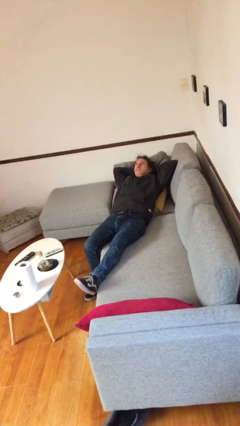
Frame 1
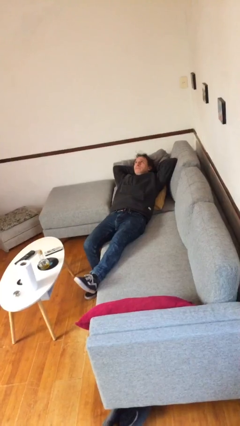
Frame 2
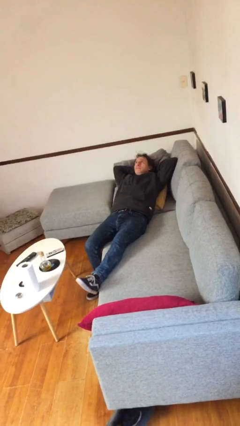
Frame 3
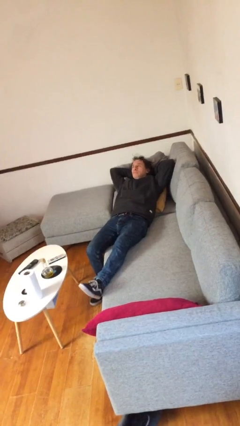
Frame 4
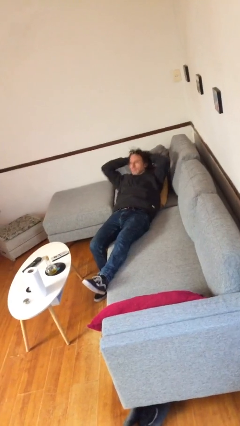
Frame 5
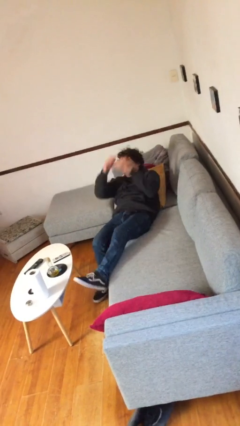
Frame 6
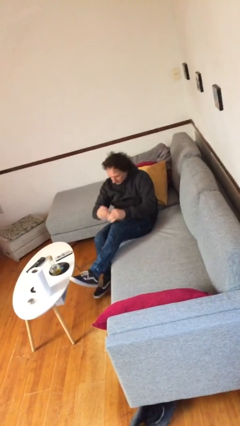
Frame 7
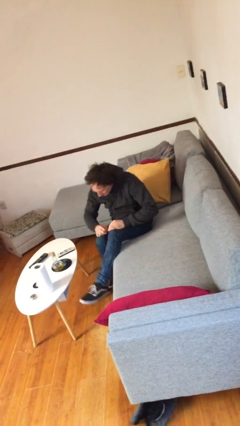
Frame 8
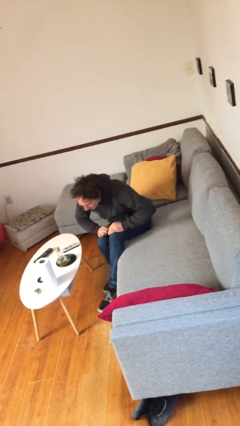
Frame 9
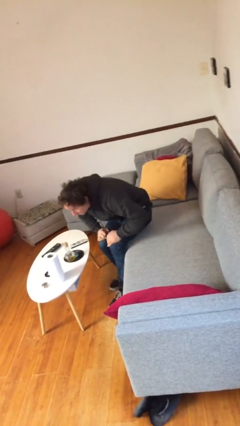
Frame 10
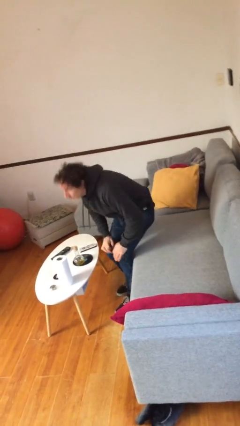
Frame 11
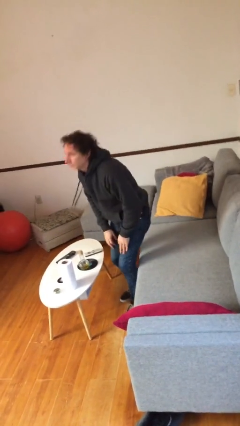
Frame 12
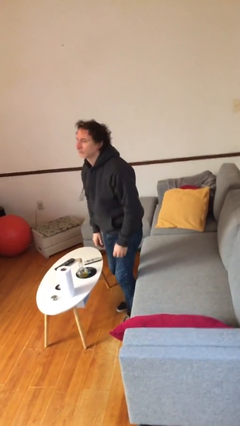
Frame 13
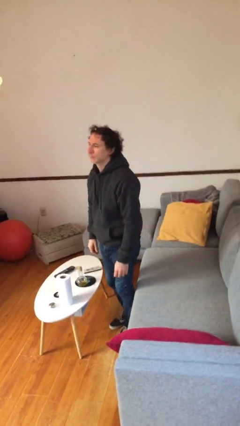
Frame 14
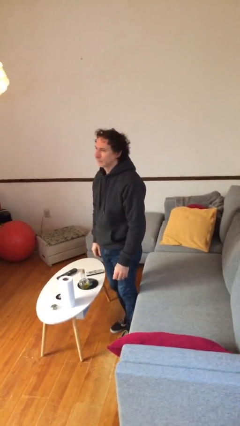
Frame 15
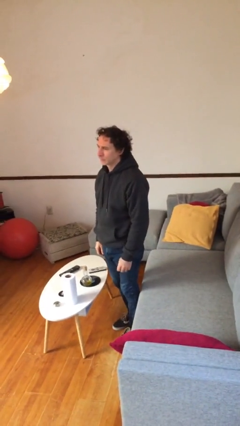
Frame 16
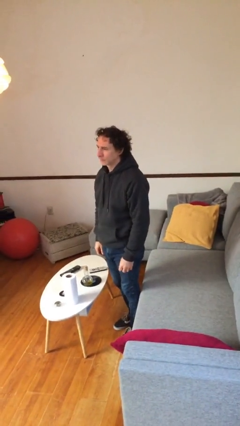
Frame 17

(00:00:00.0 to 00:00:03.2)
person stands up

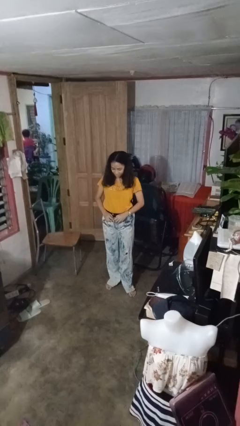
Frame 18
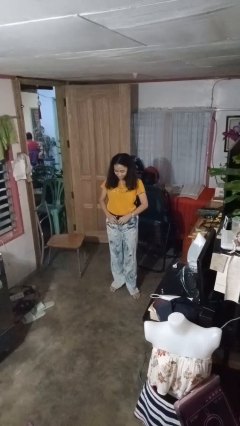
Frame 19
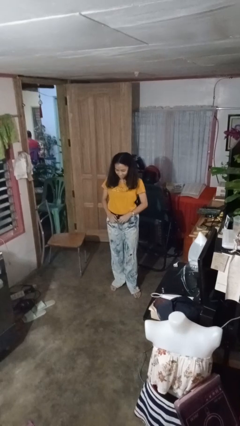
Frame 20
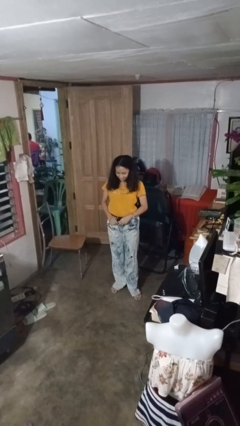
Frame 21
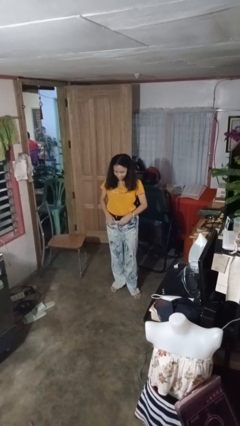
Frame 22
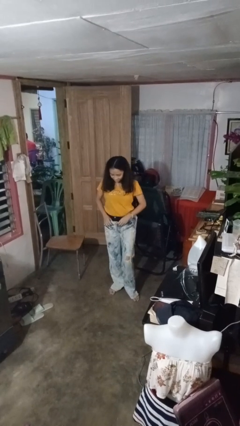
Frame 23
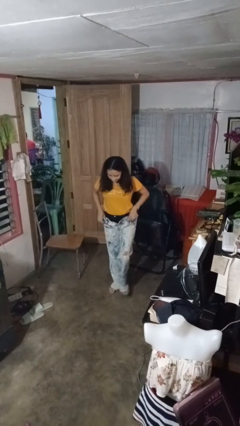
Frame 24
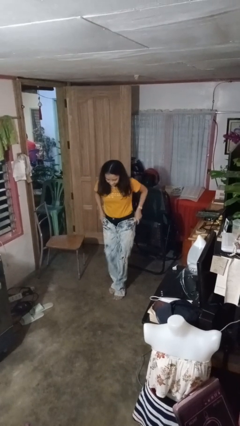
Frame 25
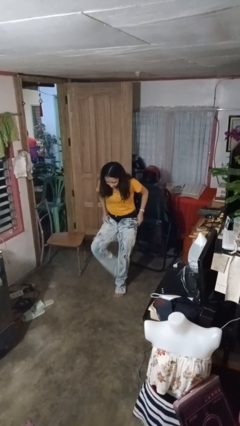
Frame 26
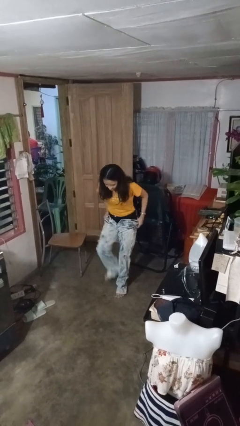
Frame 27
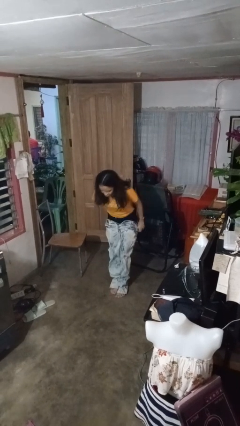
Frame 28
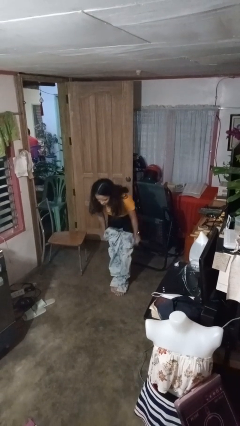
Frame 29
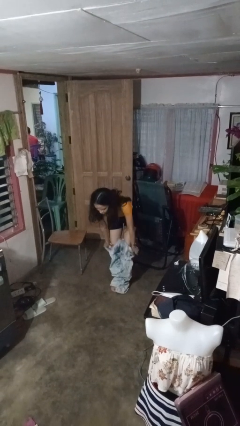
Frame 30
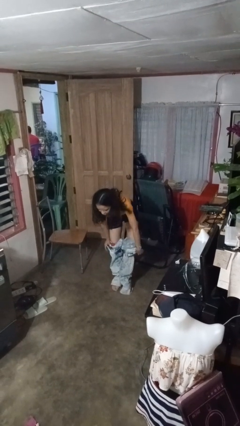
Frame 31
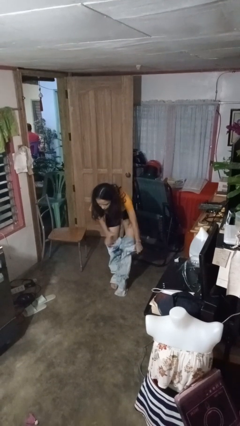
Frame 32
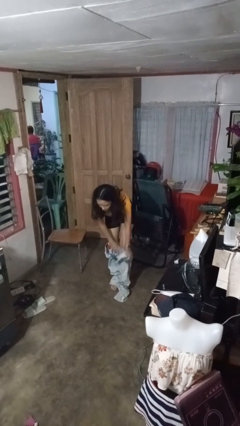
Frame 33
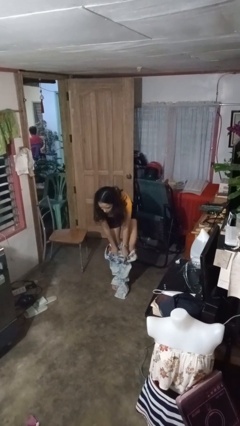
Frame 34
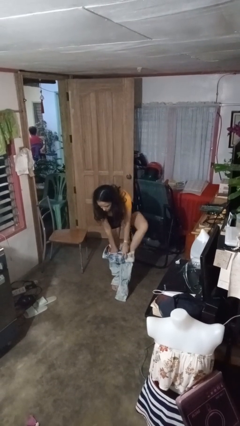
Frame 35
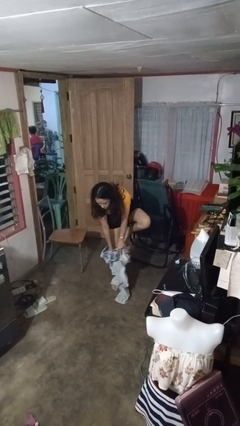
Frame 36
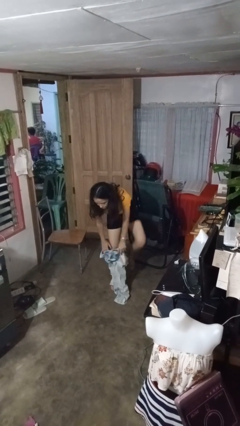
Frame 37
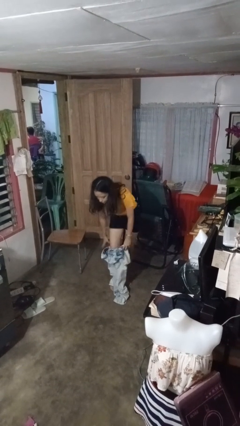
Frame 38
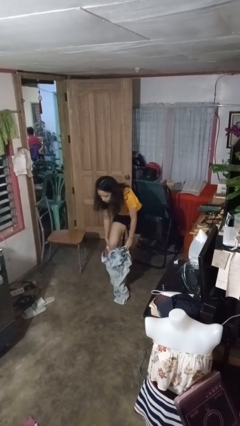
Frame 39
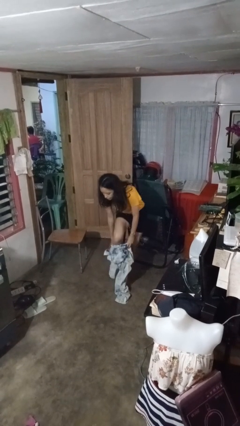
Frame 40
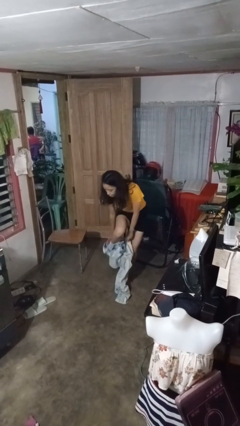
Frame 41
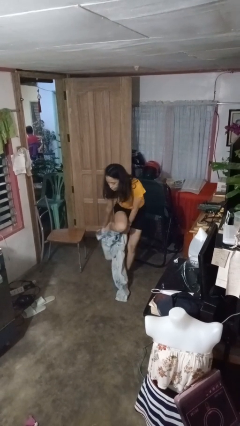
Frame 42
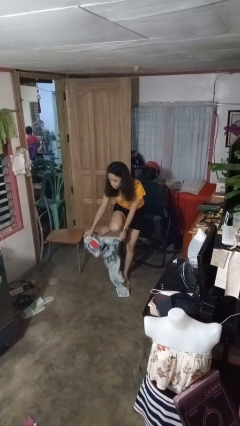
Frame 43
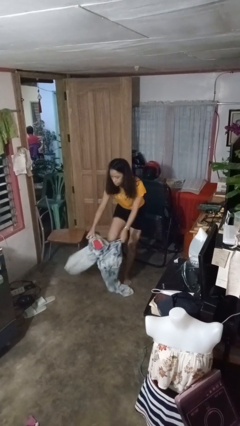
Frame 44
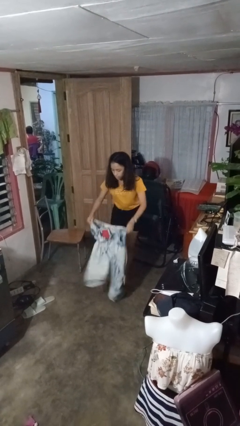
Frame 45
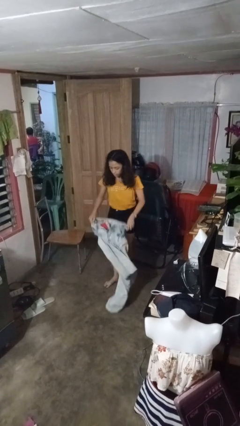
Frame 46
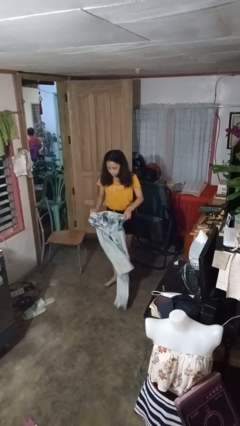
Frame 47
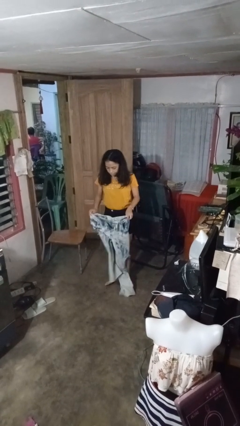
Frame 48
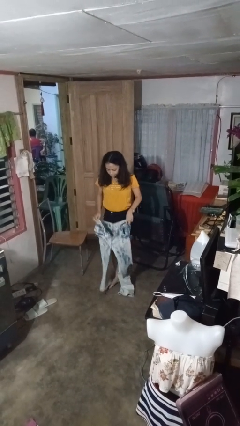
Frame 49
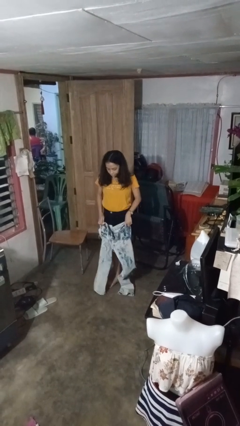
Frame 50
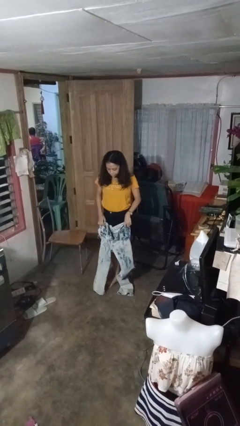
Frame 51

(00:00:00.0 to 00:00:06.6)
person takes off pants

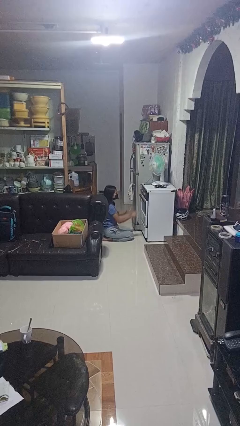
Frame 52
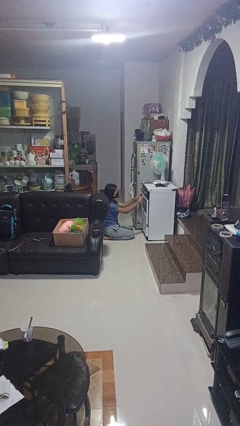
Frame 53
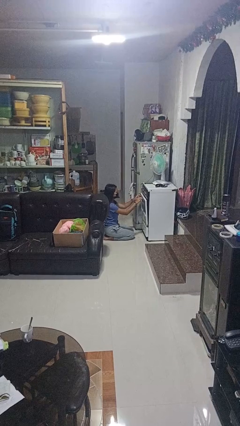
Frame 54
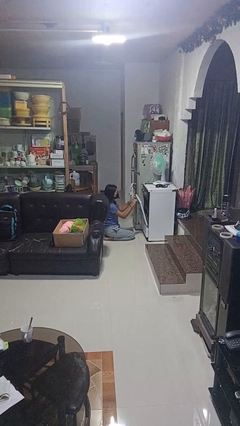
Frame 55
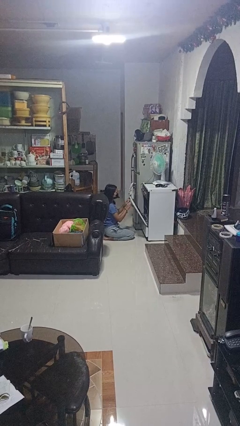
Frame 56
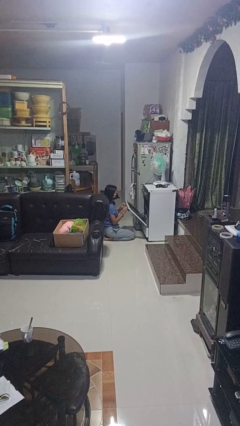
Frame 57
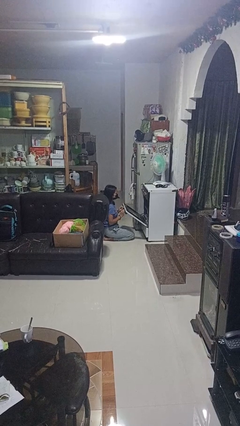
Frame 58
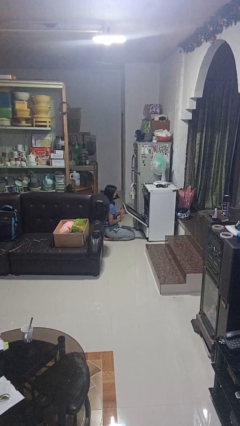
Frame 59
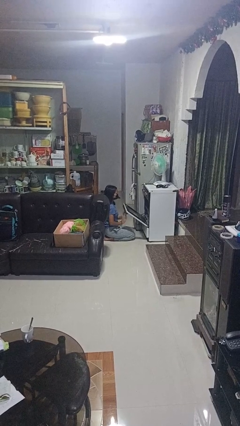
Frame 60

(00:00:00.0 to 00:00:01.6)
person opens oven door

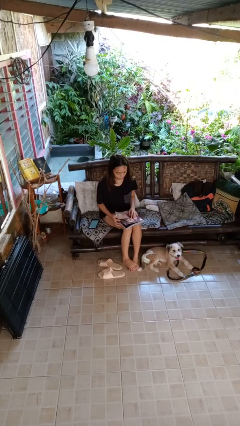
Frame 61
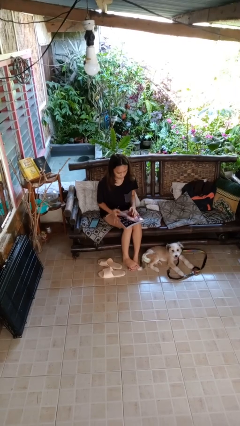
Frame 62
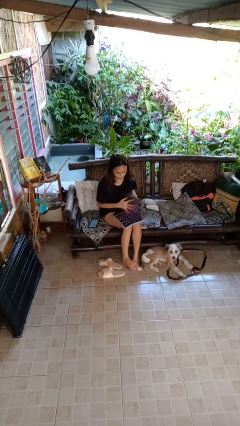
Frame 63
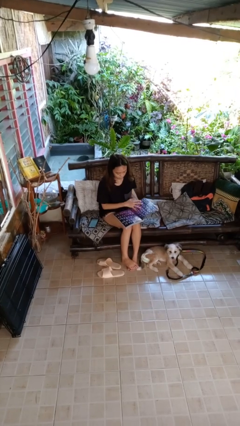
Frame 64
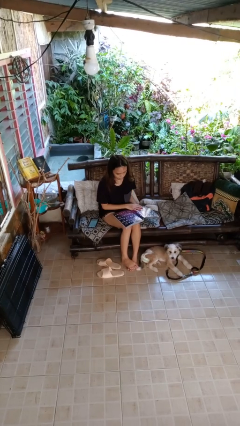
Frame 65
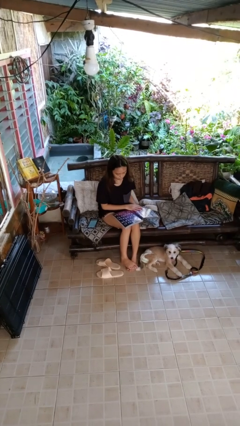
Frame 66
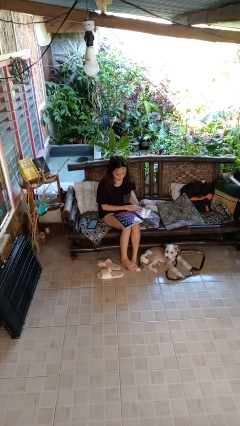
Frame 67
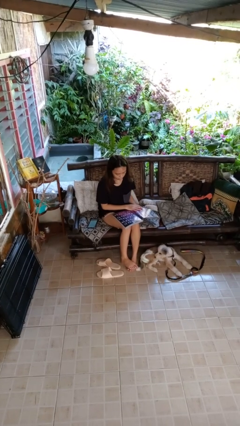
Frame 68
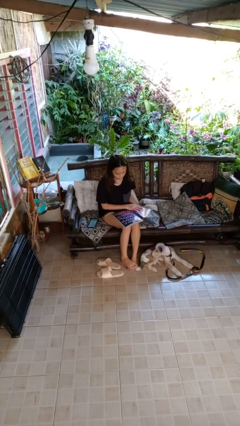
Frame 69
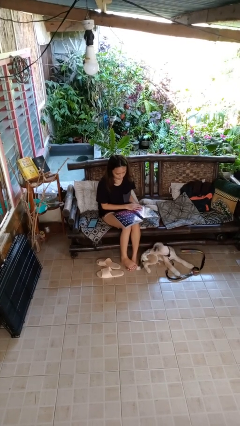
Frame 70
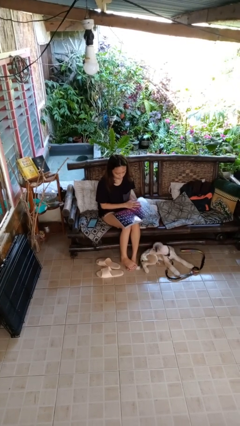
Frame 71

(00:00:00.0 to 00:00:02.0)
person reads magazine

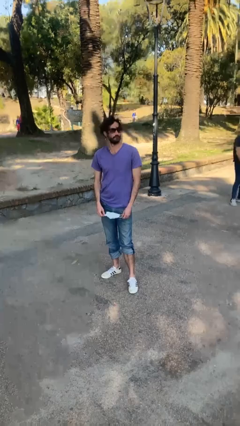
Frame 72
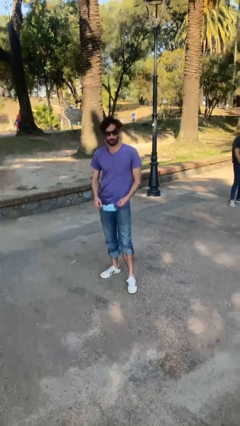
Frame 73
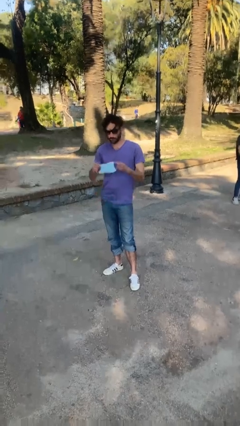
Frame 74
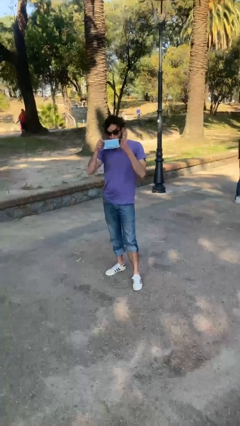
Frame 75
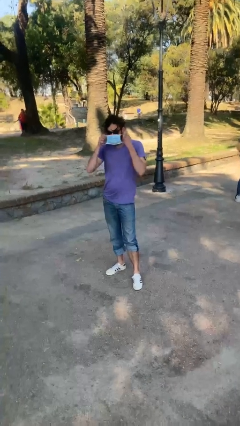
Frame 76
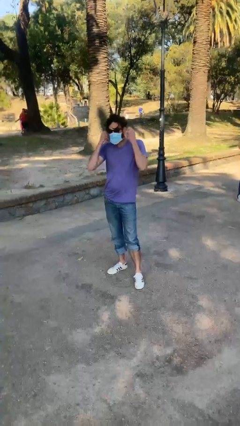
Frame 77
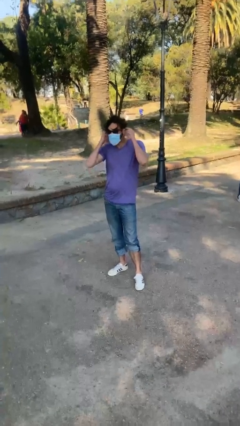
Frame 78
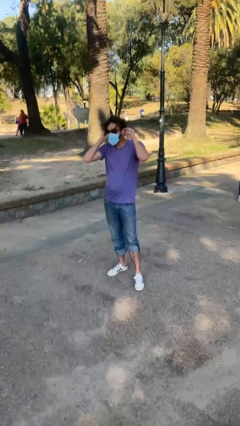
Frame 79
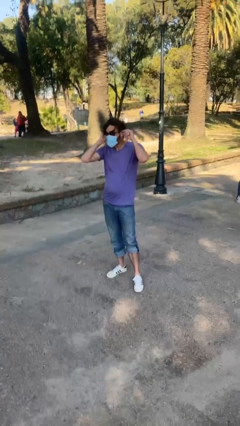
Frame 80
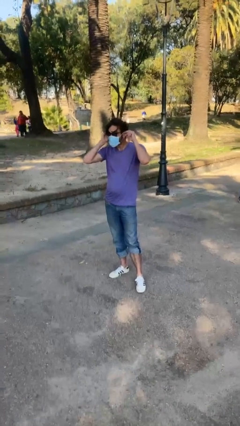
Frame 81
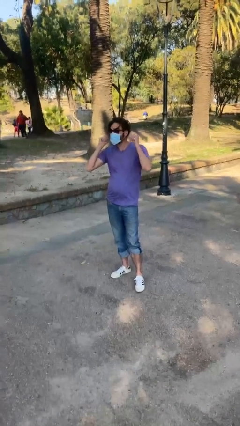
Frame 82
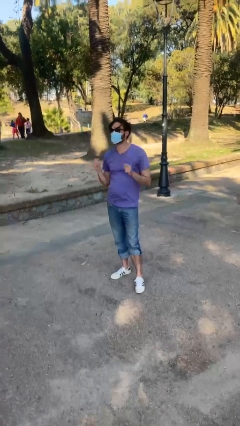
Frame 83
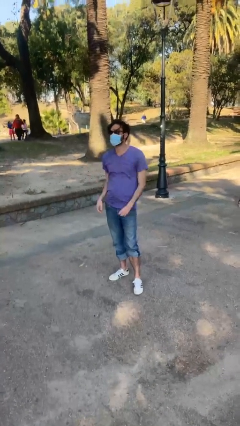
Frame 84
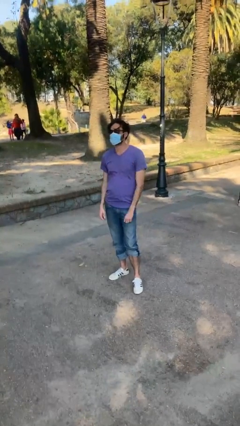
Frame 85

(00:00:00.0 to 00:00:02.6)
person puts on facemask

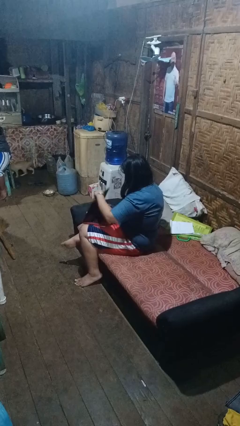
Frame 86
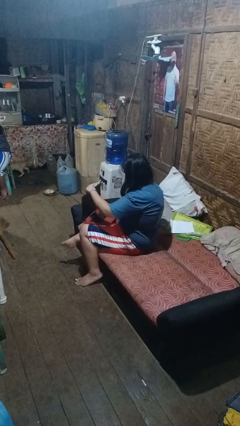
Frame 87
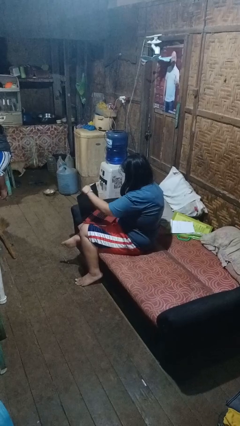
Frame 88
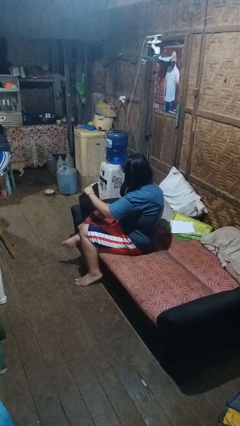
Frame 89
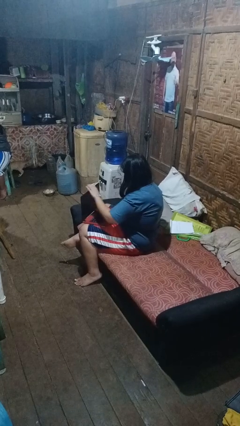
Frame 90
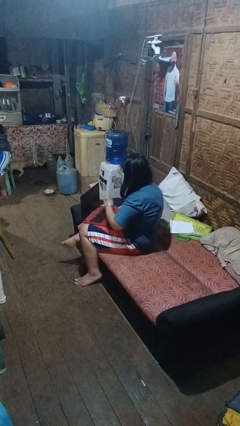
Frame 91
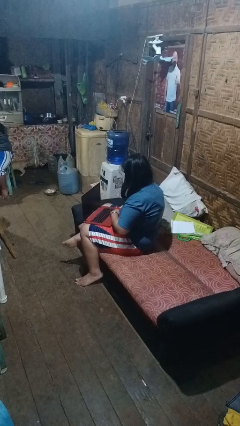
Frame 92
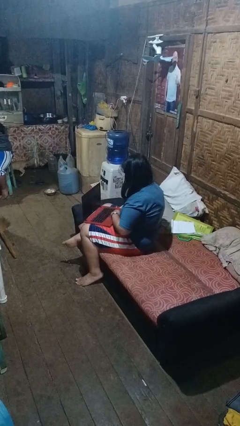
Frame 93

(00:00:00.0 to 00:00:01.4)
person opens laptop

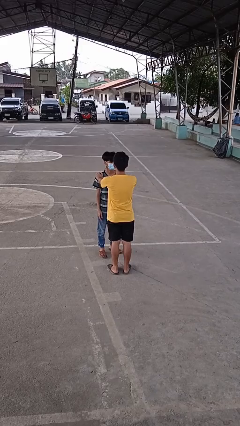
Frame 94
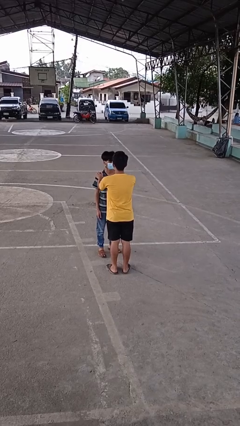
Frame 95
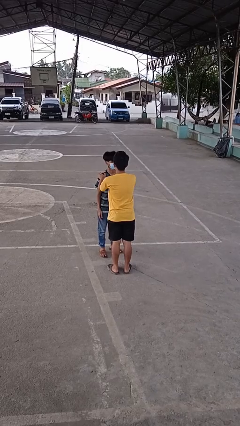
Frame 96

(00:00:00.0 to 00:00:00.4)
person grabs person by shoulder
